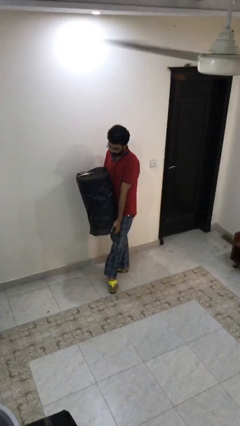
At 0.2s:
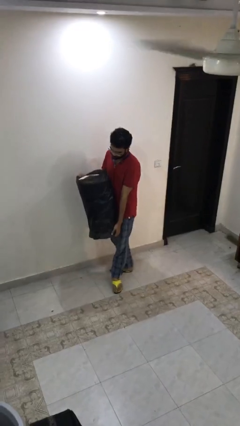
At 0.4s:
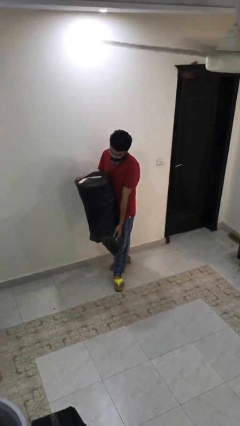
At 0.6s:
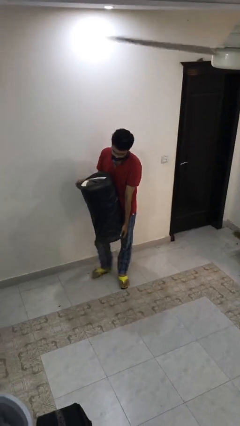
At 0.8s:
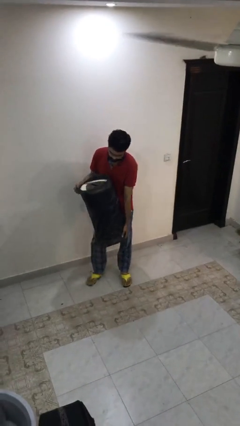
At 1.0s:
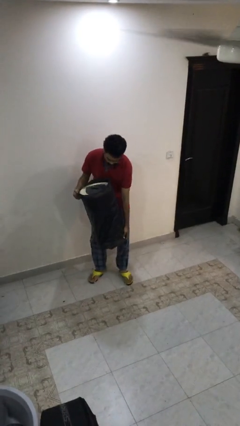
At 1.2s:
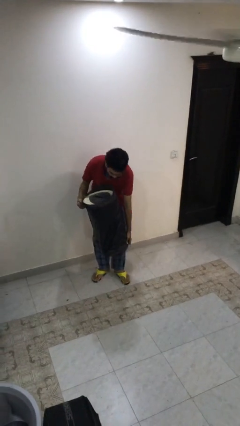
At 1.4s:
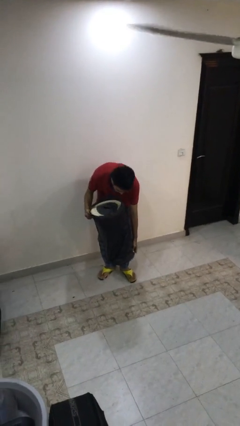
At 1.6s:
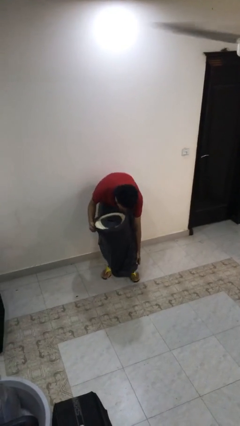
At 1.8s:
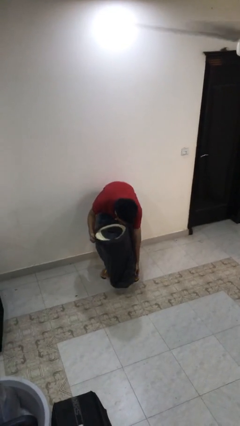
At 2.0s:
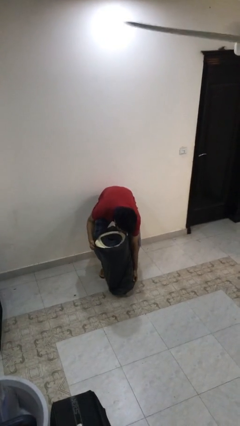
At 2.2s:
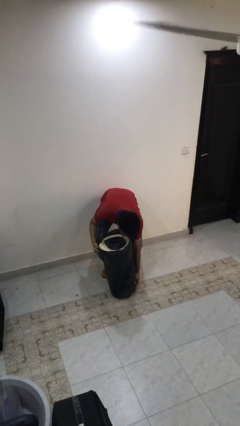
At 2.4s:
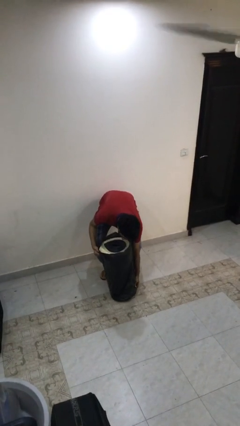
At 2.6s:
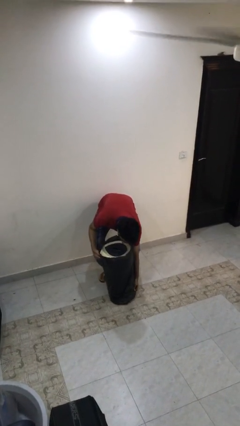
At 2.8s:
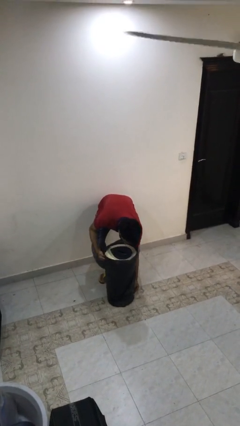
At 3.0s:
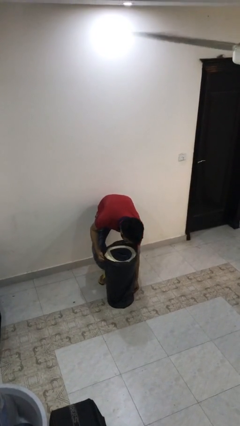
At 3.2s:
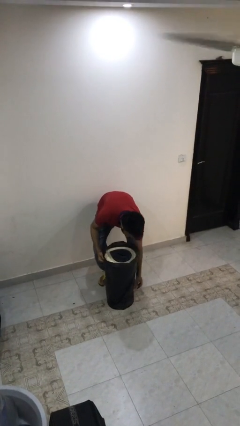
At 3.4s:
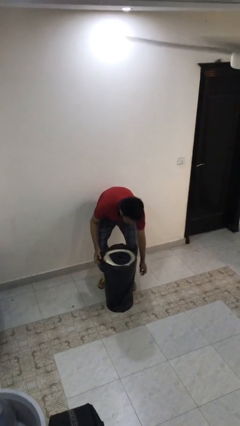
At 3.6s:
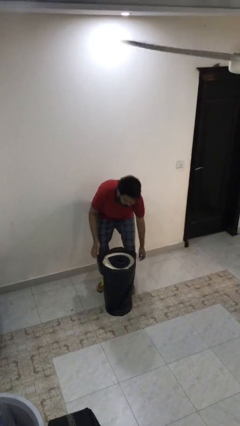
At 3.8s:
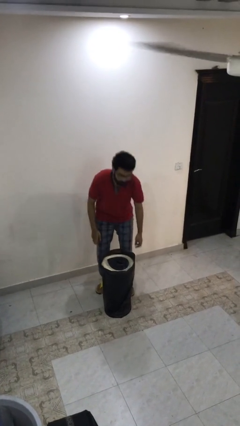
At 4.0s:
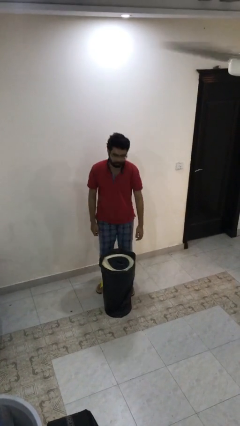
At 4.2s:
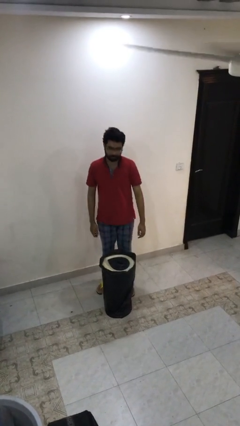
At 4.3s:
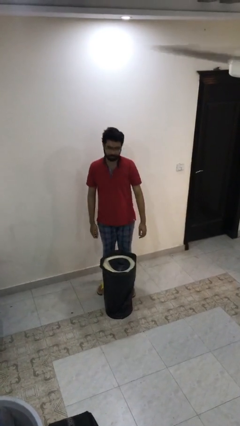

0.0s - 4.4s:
person puts down object on floor

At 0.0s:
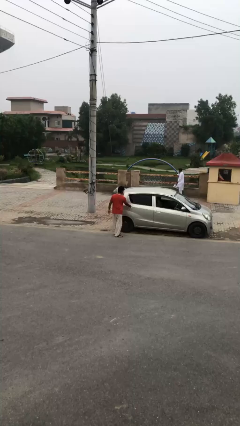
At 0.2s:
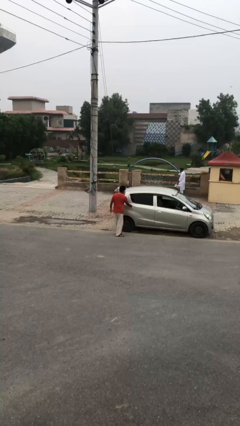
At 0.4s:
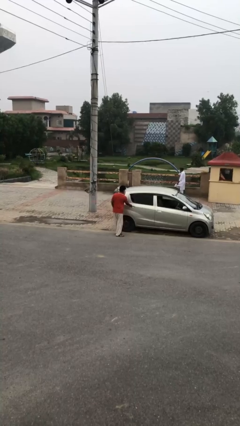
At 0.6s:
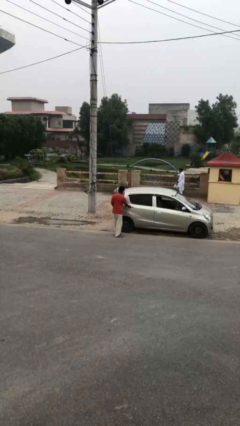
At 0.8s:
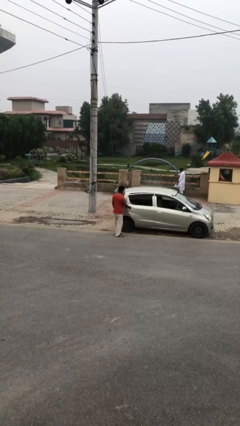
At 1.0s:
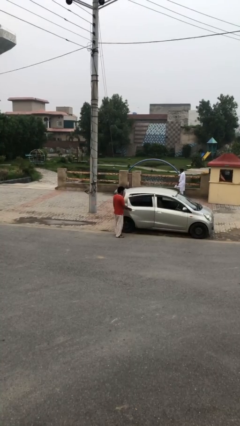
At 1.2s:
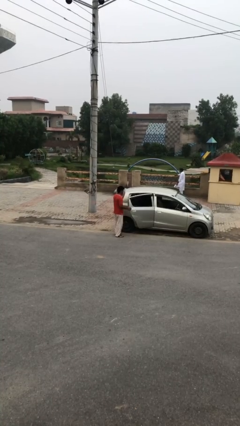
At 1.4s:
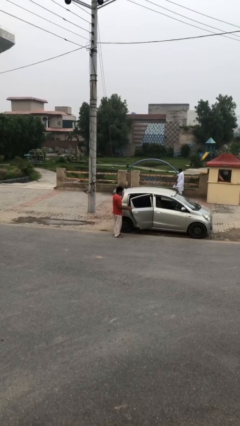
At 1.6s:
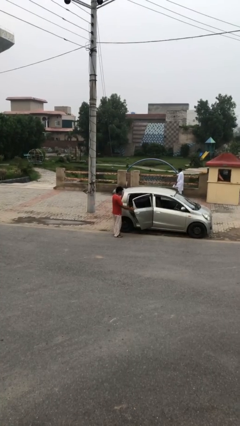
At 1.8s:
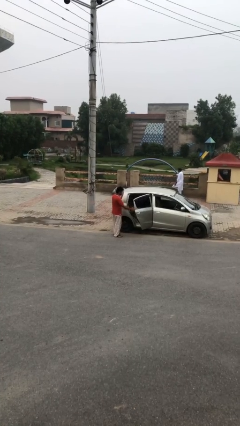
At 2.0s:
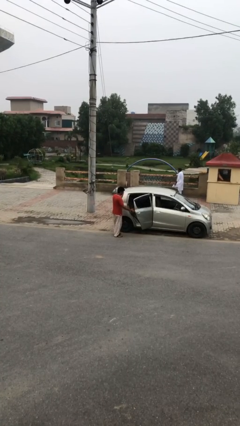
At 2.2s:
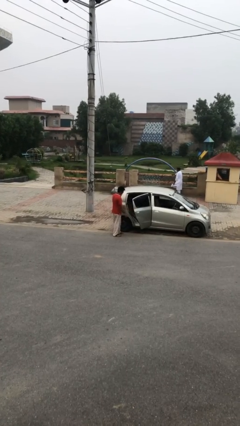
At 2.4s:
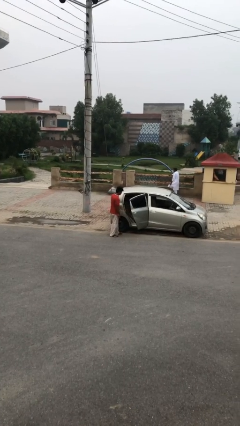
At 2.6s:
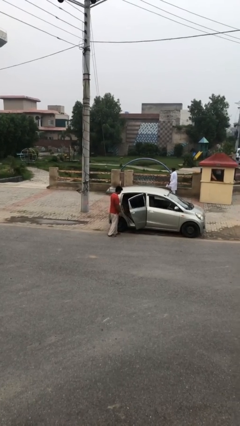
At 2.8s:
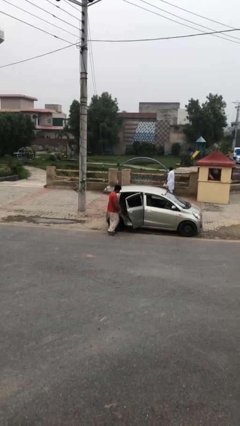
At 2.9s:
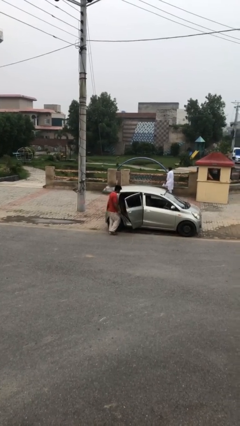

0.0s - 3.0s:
person opens car door

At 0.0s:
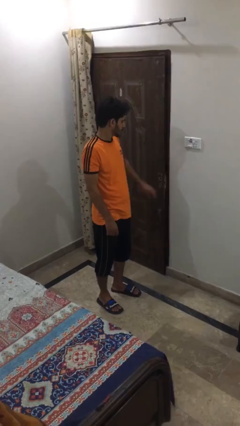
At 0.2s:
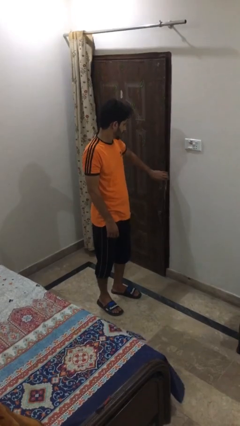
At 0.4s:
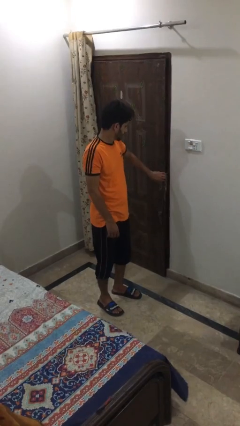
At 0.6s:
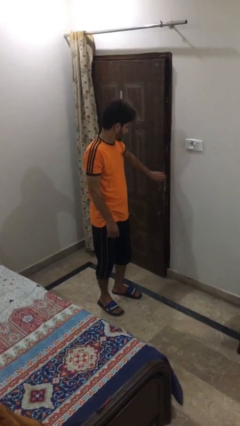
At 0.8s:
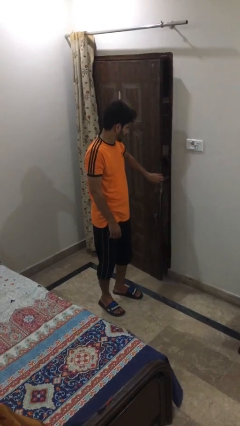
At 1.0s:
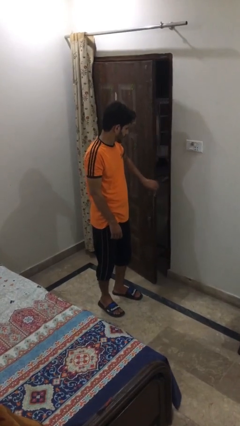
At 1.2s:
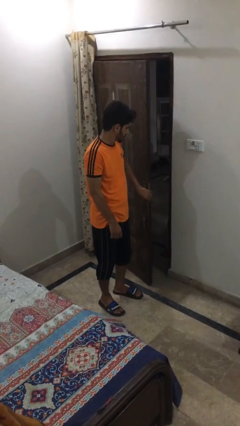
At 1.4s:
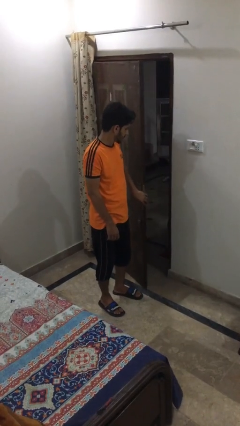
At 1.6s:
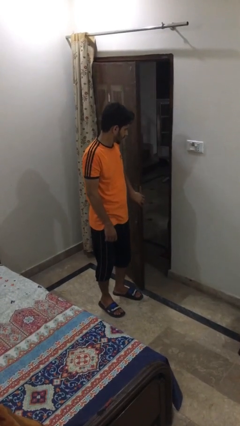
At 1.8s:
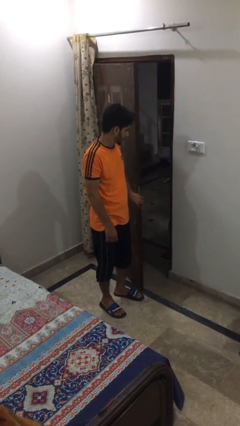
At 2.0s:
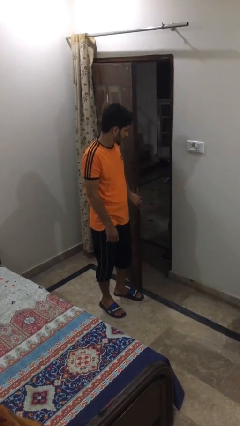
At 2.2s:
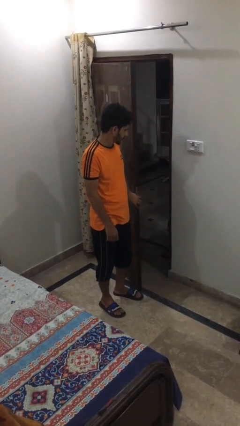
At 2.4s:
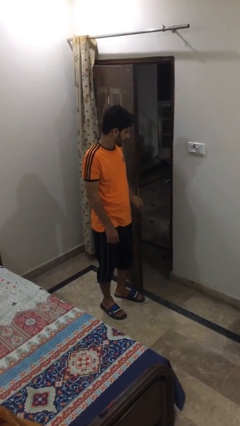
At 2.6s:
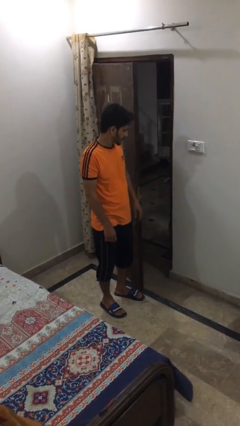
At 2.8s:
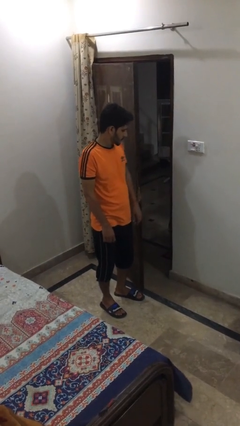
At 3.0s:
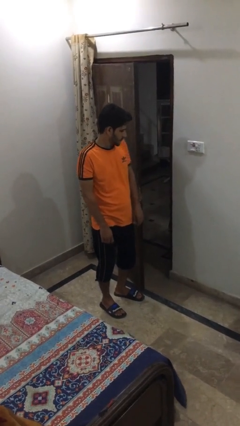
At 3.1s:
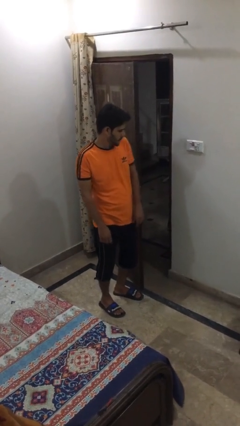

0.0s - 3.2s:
person opens facility door

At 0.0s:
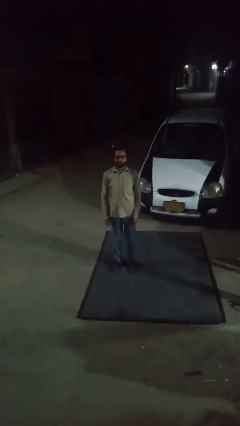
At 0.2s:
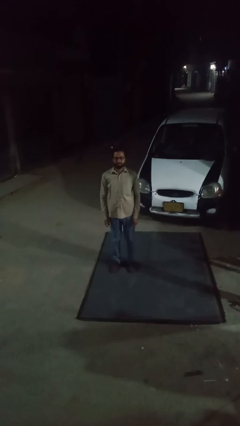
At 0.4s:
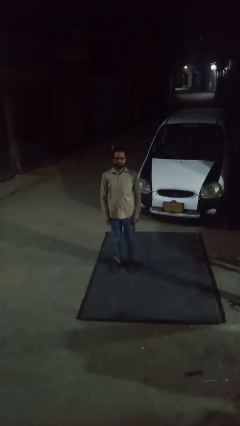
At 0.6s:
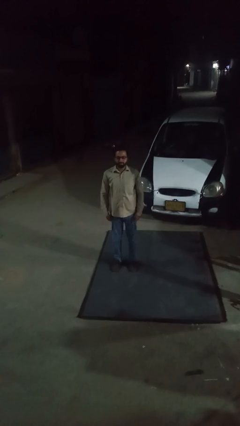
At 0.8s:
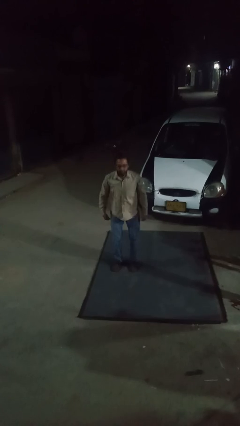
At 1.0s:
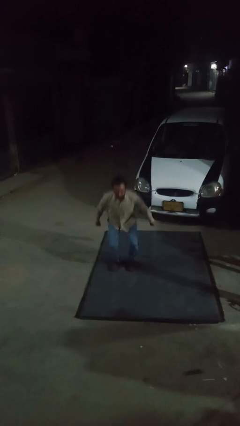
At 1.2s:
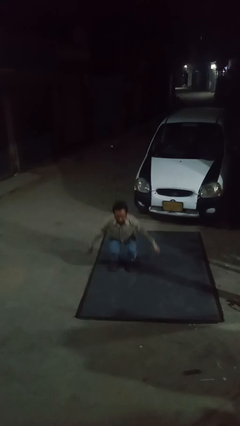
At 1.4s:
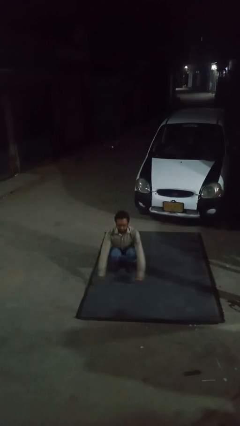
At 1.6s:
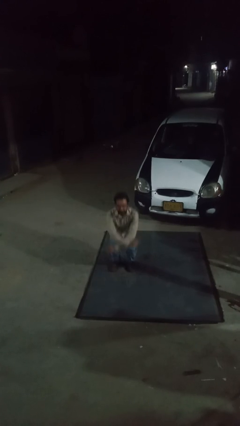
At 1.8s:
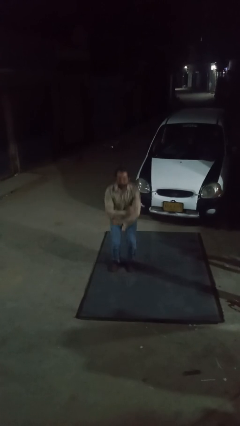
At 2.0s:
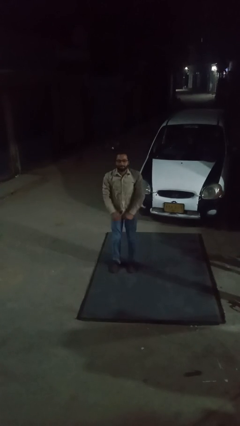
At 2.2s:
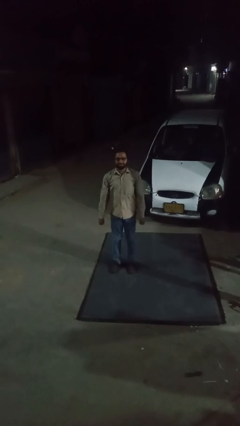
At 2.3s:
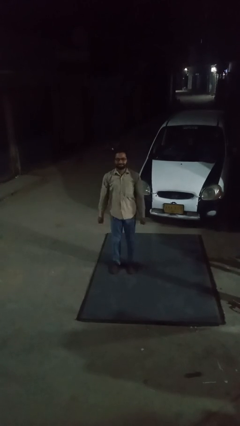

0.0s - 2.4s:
person exercises with situp

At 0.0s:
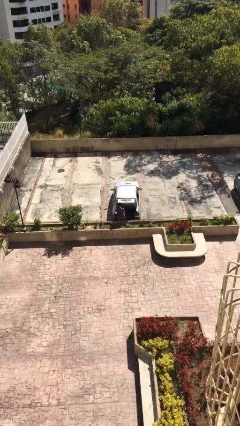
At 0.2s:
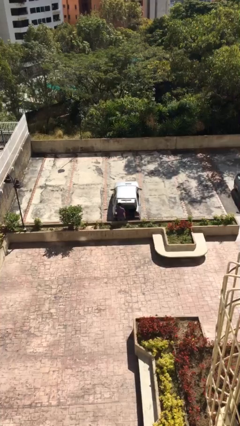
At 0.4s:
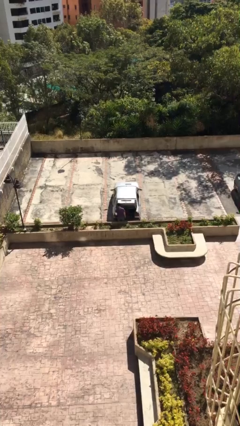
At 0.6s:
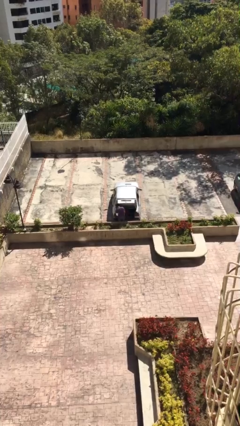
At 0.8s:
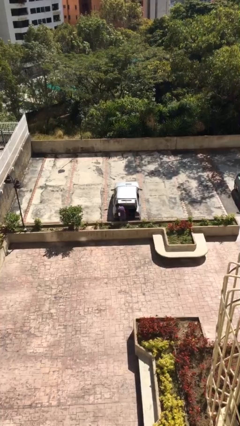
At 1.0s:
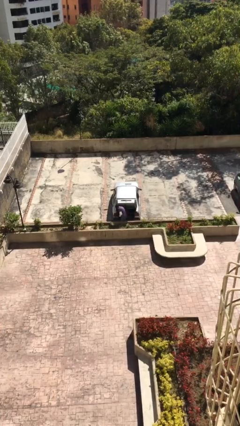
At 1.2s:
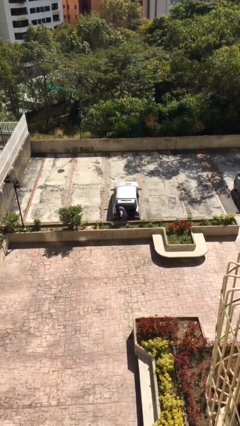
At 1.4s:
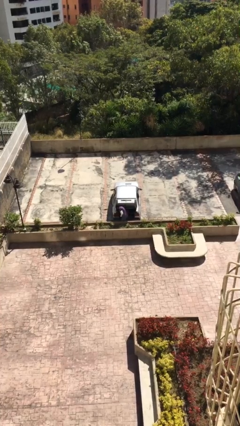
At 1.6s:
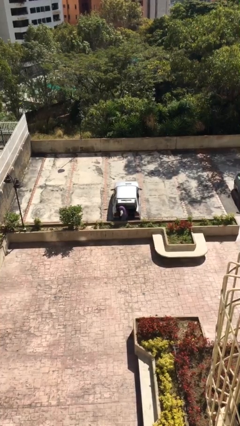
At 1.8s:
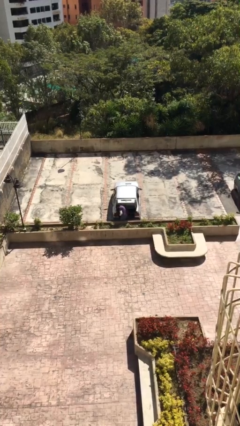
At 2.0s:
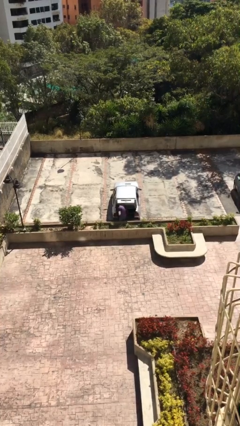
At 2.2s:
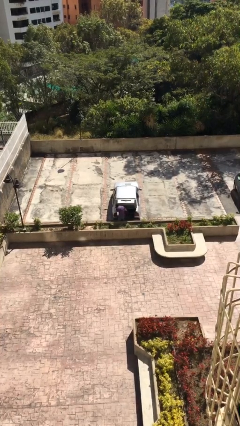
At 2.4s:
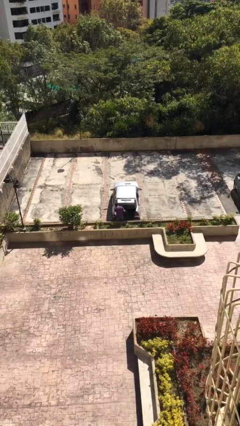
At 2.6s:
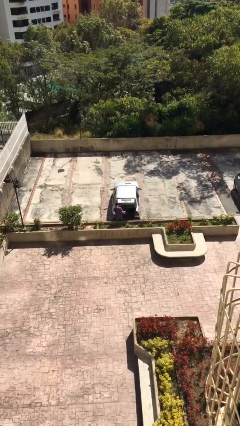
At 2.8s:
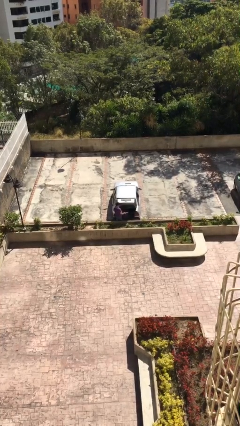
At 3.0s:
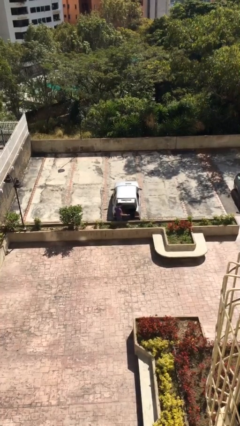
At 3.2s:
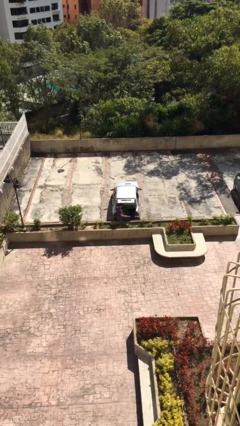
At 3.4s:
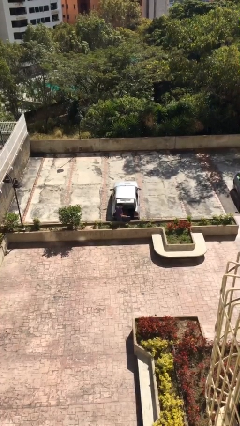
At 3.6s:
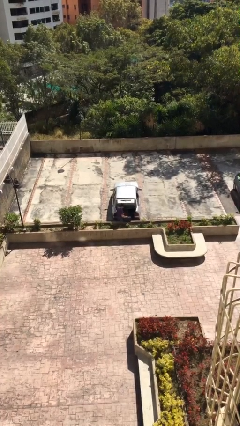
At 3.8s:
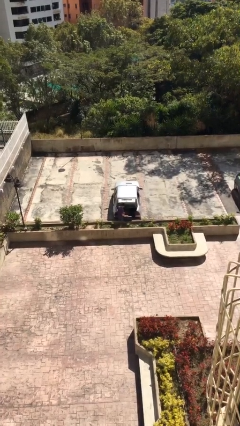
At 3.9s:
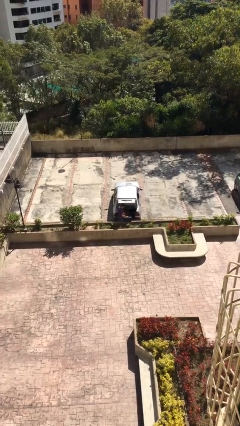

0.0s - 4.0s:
person unloads car

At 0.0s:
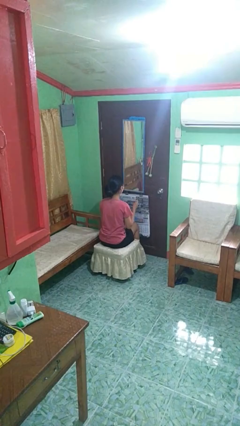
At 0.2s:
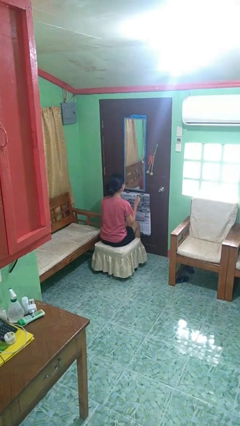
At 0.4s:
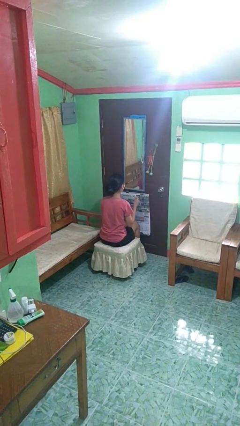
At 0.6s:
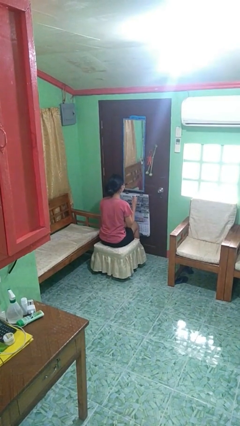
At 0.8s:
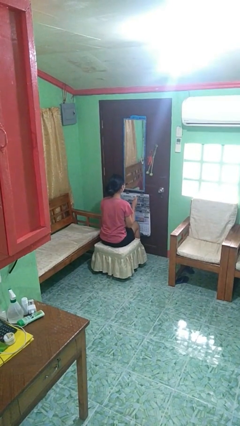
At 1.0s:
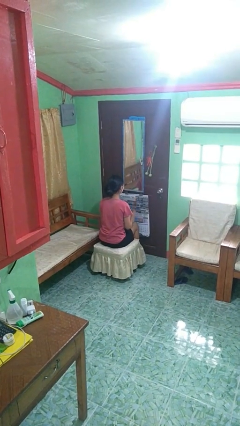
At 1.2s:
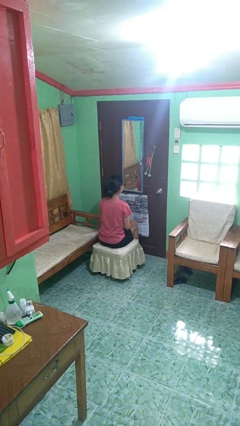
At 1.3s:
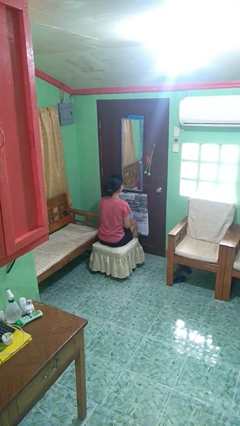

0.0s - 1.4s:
person snaps fingers
